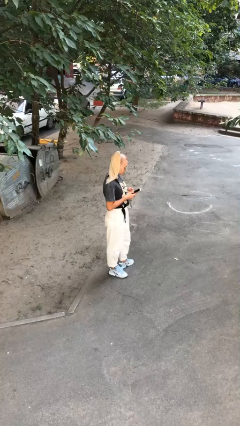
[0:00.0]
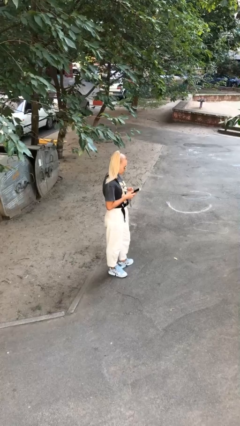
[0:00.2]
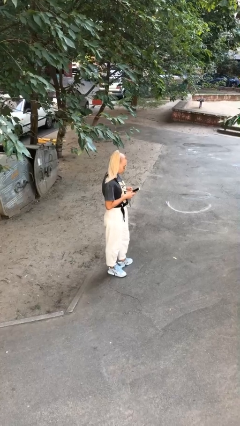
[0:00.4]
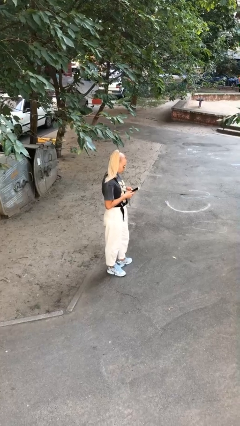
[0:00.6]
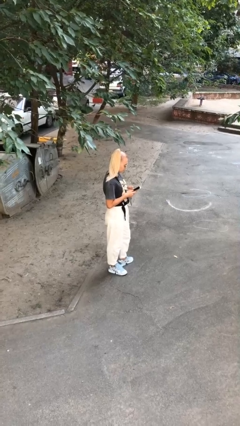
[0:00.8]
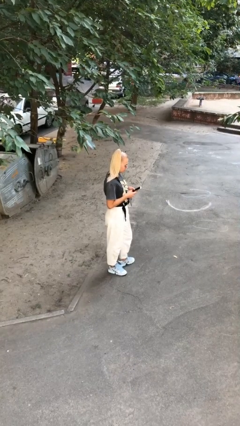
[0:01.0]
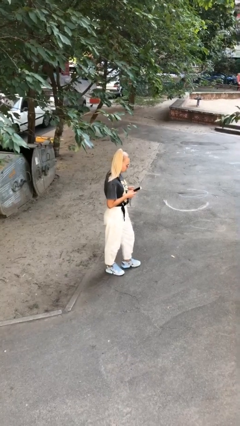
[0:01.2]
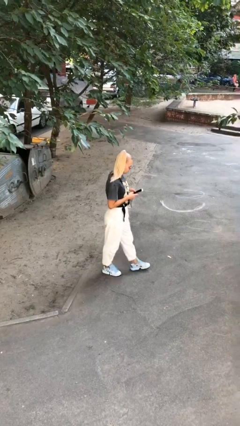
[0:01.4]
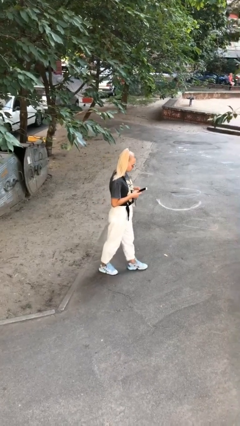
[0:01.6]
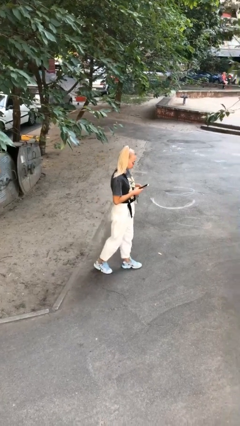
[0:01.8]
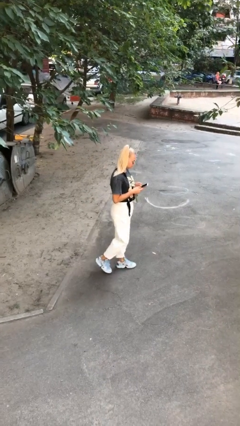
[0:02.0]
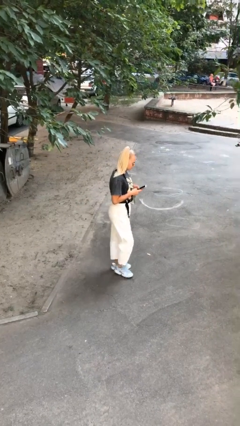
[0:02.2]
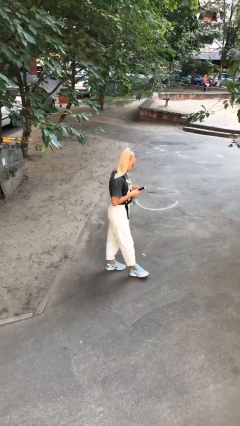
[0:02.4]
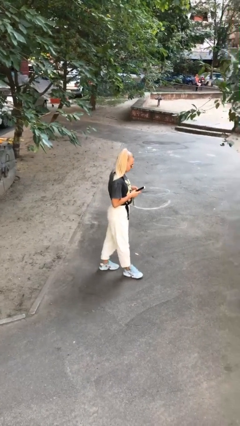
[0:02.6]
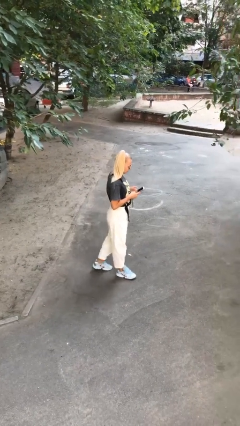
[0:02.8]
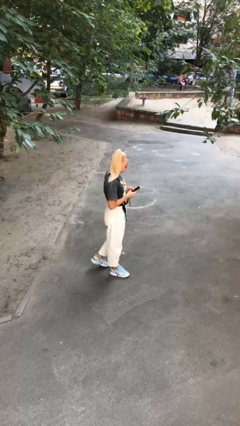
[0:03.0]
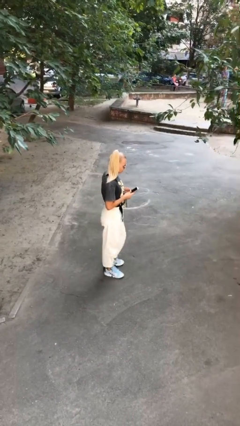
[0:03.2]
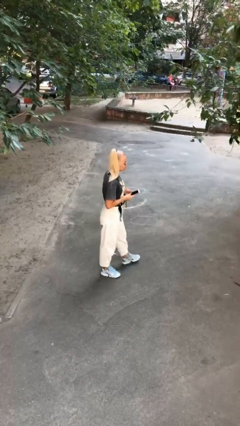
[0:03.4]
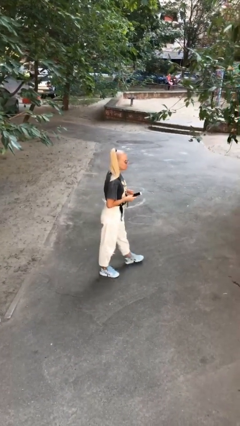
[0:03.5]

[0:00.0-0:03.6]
person texts on phone

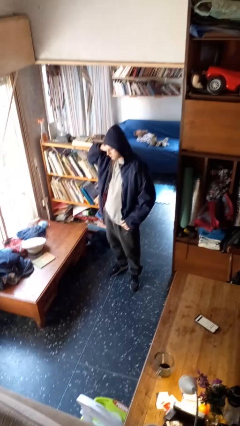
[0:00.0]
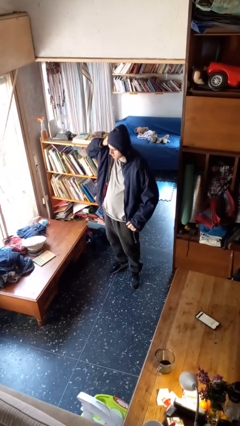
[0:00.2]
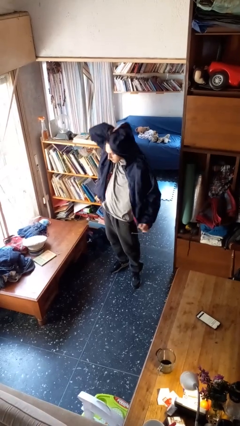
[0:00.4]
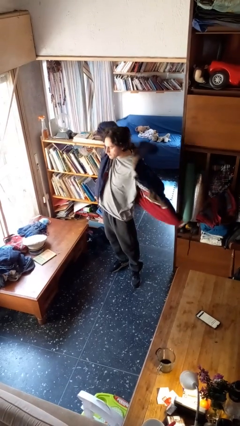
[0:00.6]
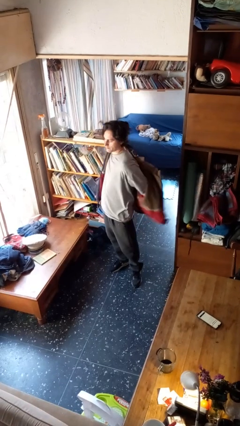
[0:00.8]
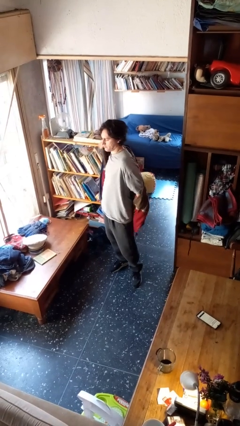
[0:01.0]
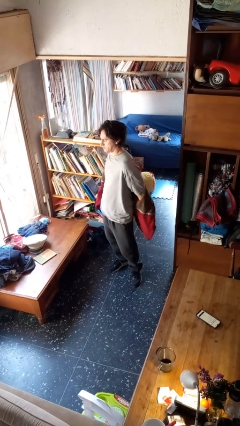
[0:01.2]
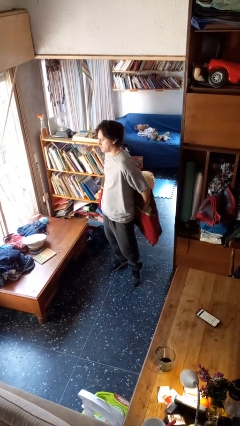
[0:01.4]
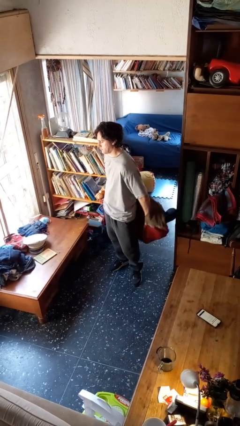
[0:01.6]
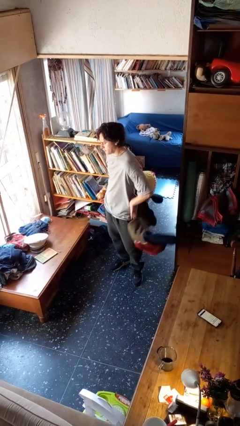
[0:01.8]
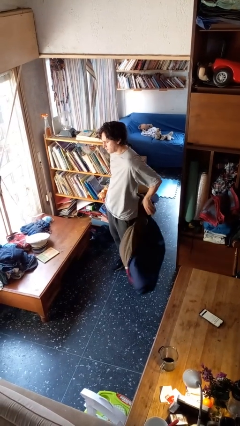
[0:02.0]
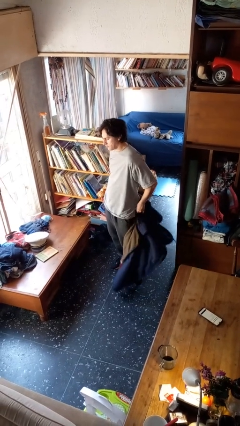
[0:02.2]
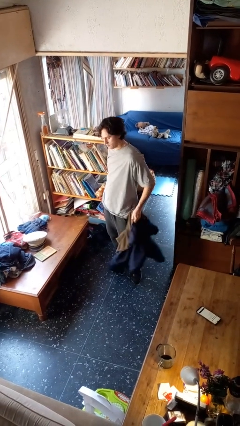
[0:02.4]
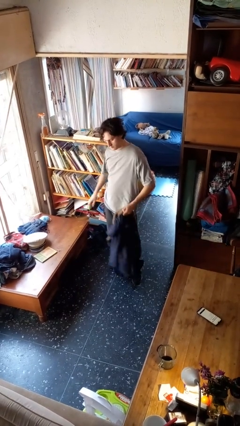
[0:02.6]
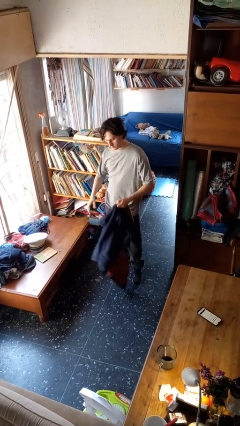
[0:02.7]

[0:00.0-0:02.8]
person takes off hoodie

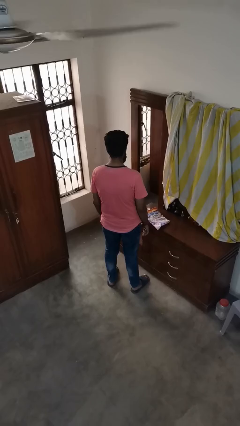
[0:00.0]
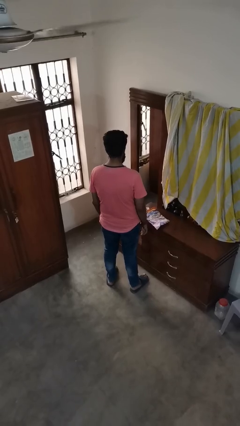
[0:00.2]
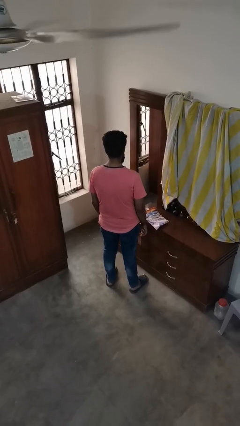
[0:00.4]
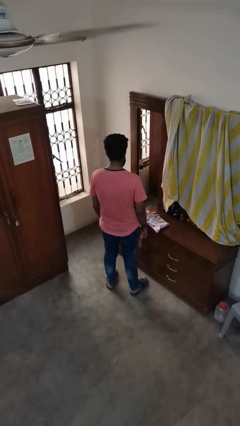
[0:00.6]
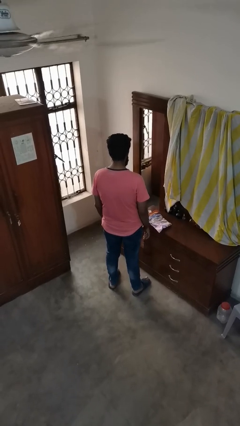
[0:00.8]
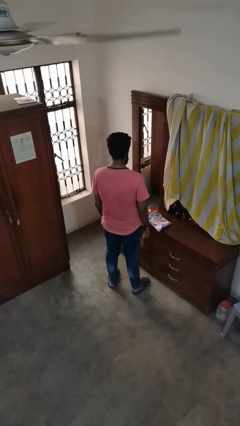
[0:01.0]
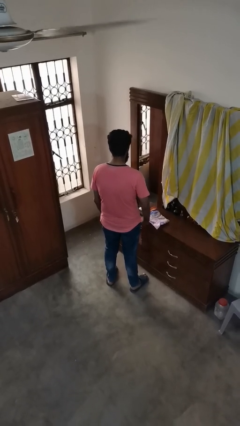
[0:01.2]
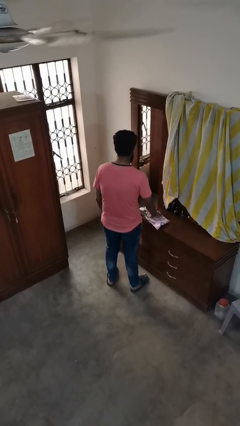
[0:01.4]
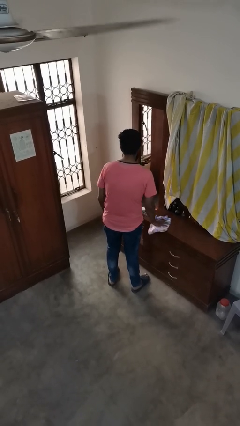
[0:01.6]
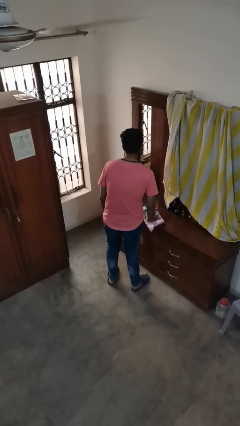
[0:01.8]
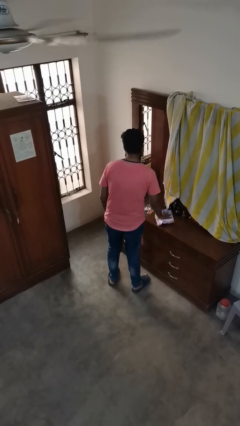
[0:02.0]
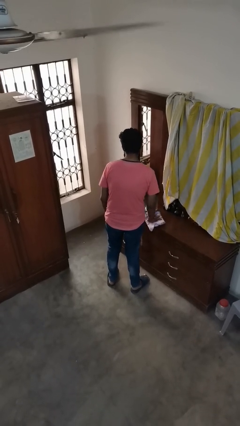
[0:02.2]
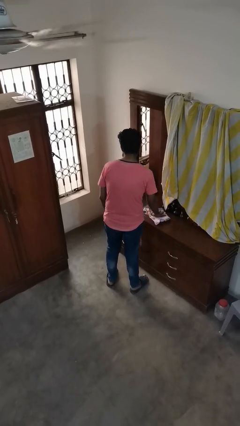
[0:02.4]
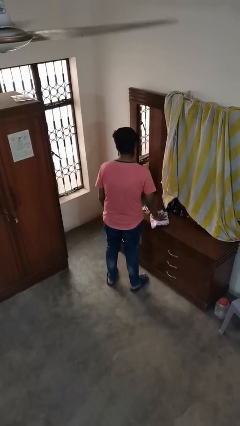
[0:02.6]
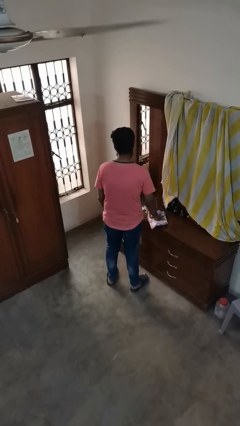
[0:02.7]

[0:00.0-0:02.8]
person cleans table with rag

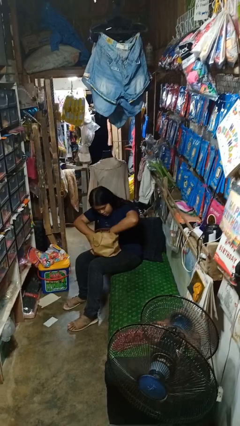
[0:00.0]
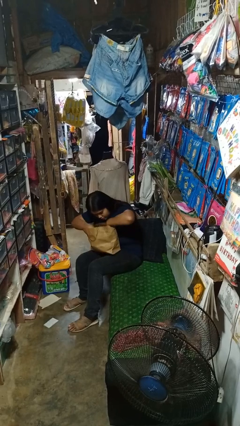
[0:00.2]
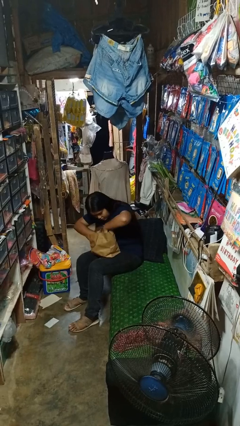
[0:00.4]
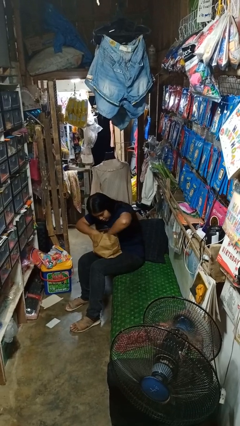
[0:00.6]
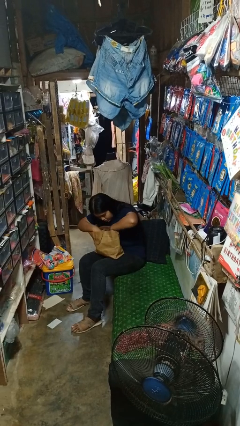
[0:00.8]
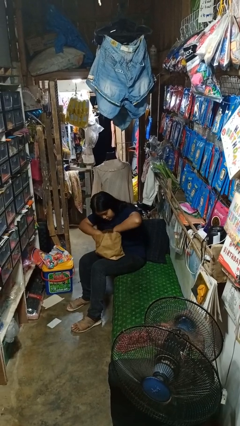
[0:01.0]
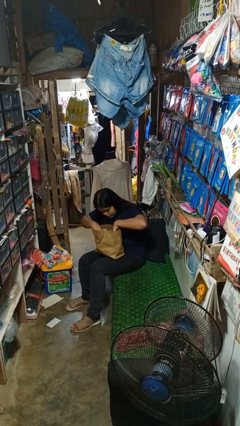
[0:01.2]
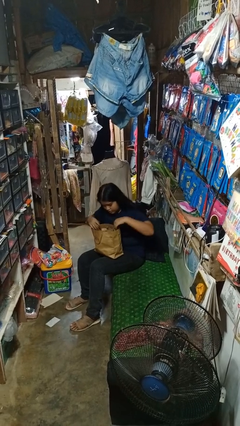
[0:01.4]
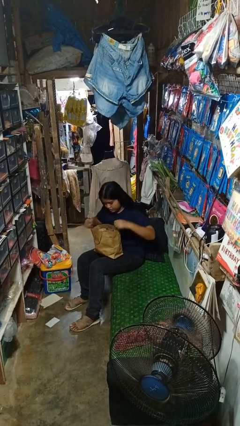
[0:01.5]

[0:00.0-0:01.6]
person searches in bag

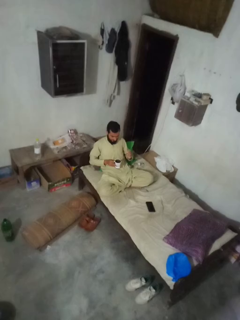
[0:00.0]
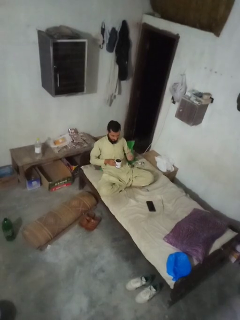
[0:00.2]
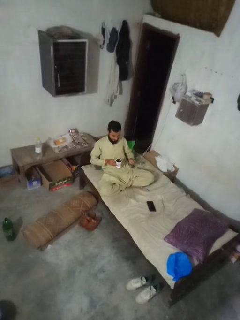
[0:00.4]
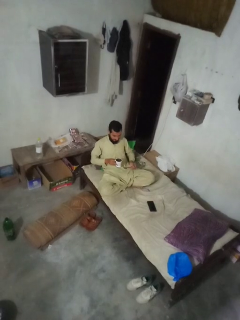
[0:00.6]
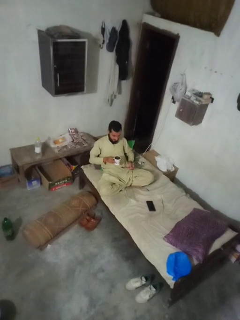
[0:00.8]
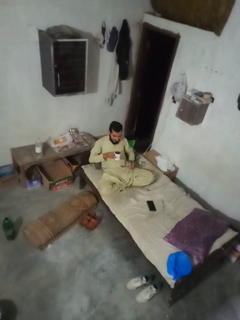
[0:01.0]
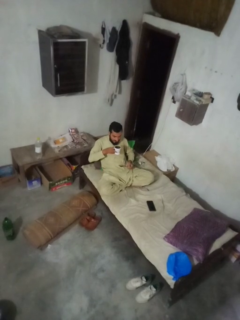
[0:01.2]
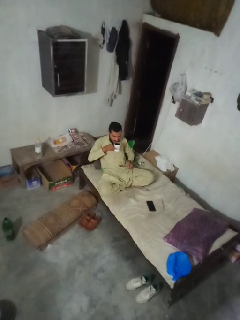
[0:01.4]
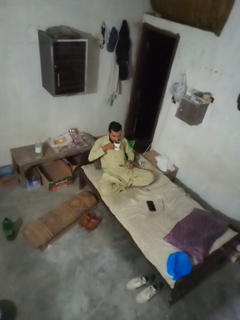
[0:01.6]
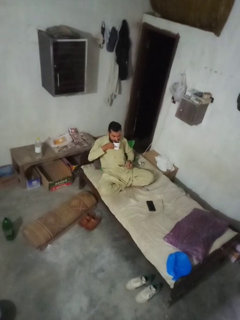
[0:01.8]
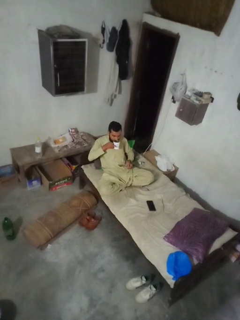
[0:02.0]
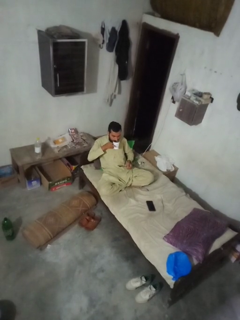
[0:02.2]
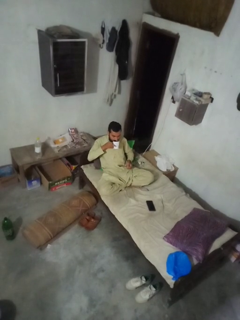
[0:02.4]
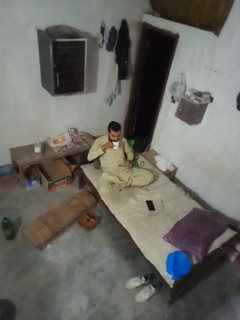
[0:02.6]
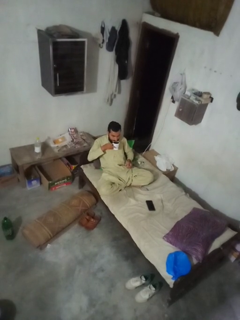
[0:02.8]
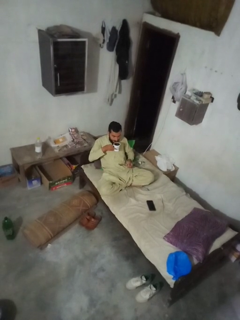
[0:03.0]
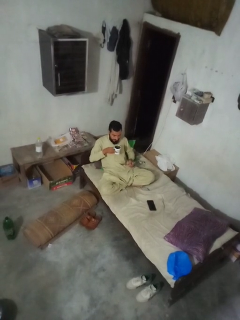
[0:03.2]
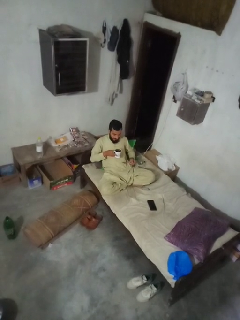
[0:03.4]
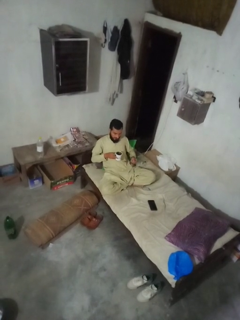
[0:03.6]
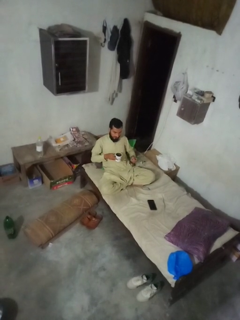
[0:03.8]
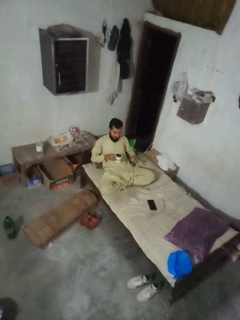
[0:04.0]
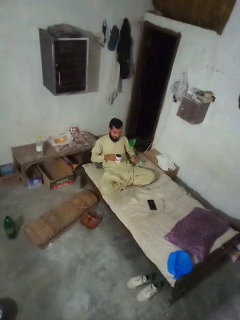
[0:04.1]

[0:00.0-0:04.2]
person drinks from mug

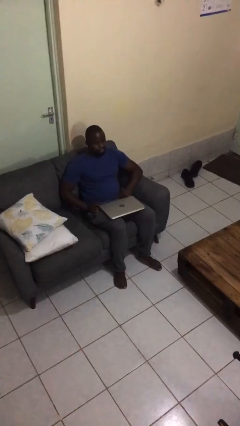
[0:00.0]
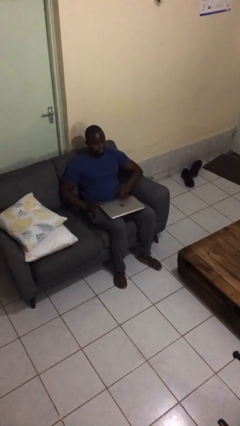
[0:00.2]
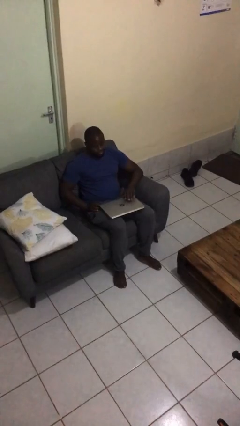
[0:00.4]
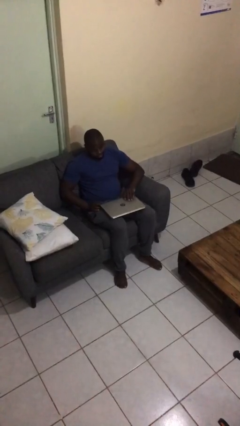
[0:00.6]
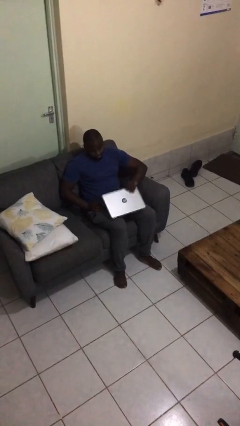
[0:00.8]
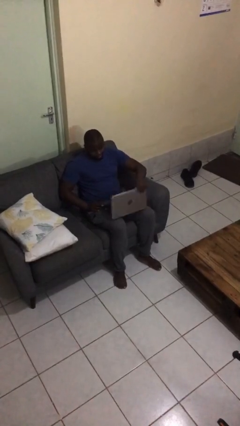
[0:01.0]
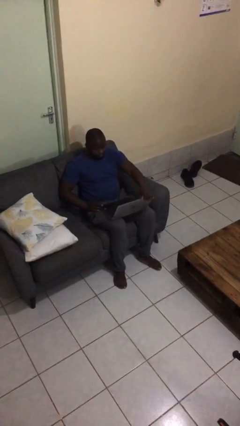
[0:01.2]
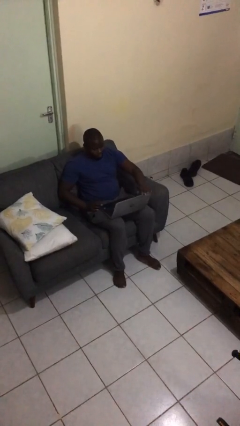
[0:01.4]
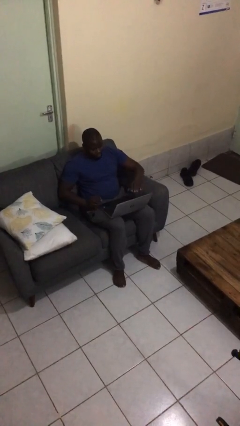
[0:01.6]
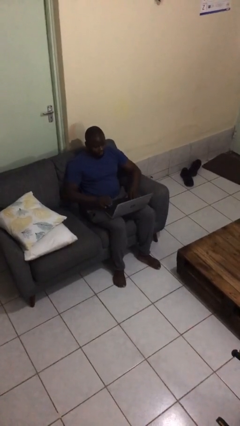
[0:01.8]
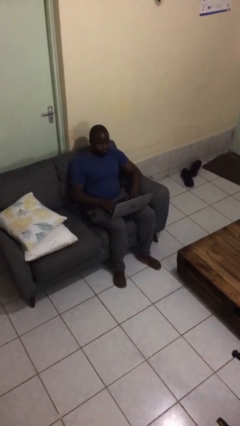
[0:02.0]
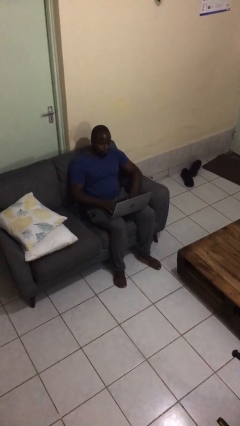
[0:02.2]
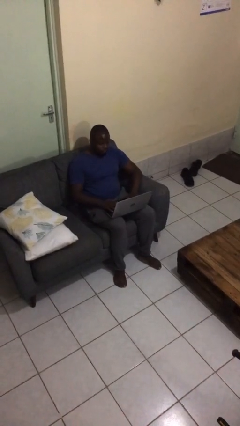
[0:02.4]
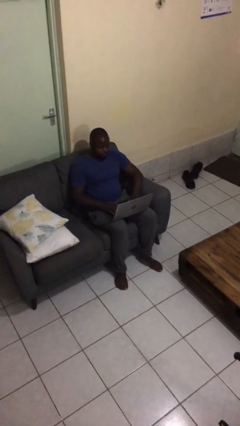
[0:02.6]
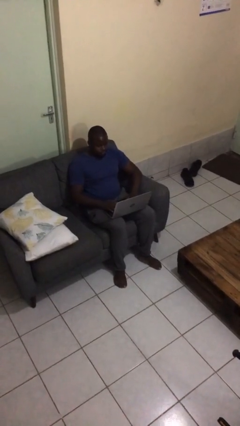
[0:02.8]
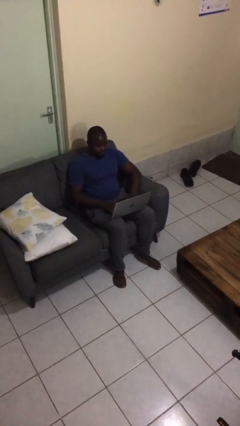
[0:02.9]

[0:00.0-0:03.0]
person opens laptop

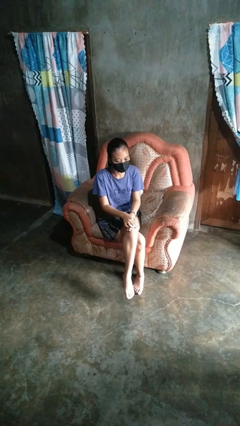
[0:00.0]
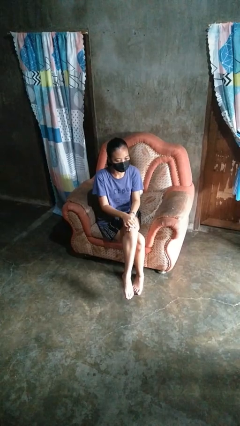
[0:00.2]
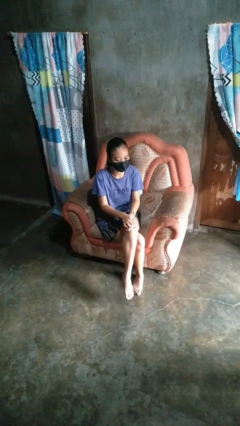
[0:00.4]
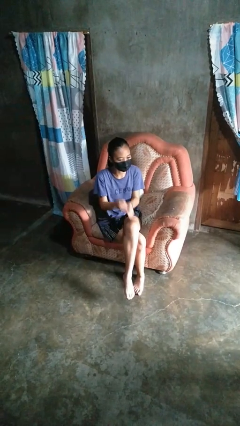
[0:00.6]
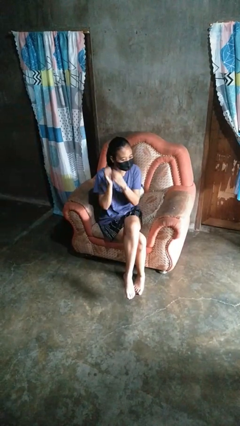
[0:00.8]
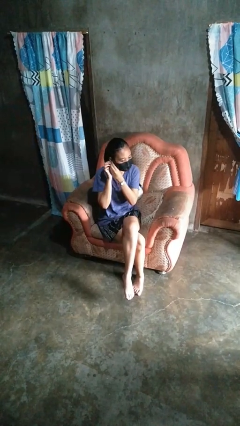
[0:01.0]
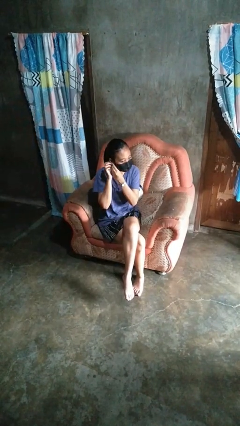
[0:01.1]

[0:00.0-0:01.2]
person takes off earrings
